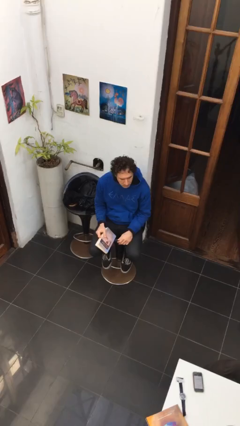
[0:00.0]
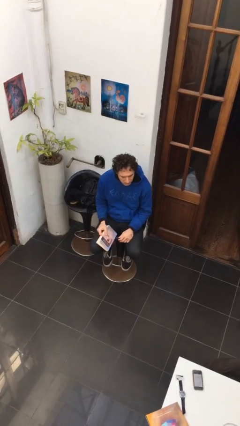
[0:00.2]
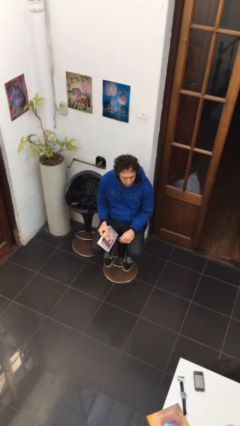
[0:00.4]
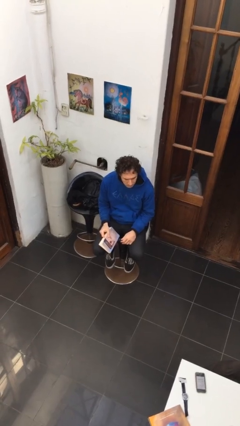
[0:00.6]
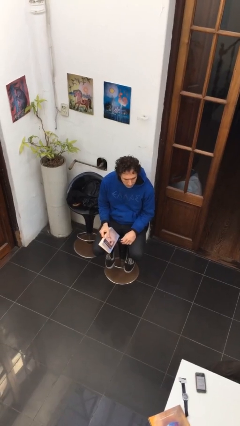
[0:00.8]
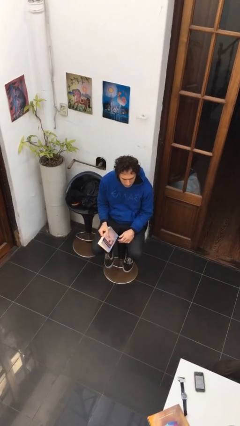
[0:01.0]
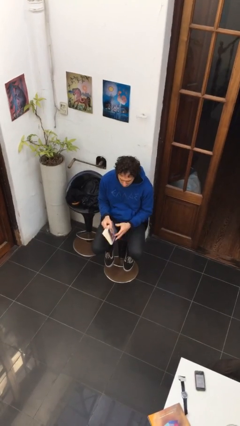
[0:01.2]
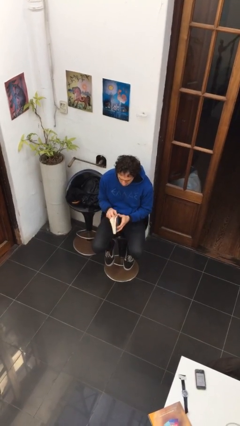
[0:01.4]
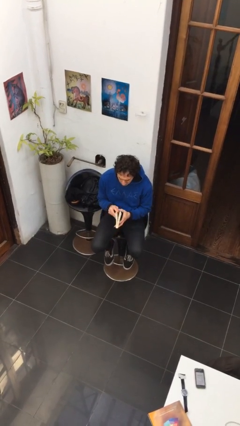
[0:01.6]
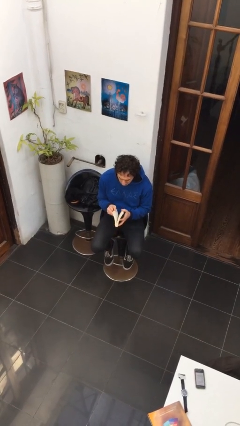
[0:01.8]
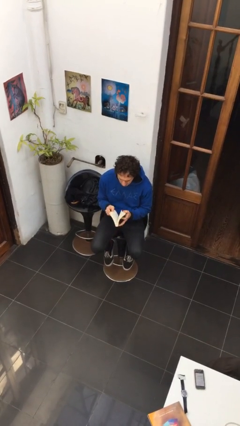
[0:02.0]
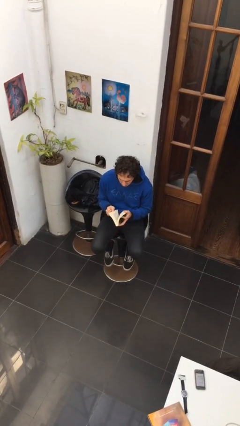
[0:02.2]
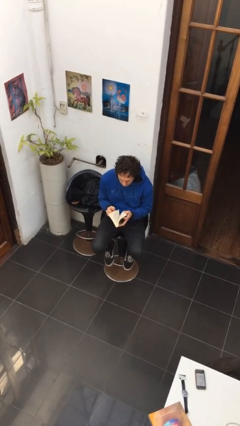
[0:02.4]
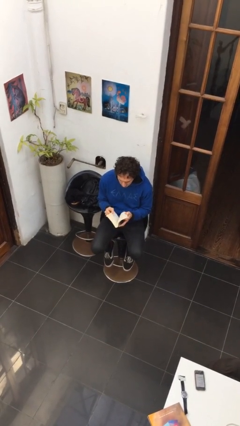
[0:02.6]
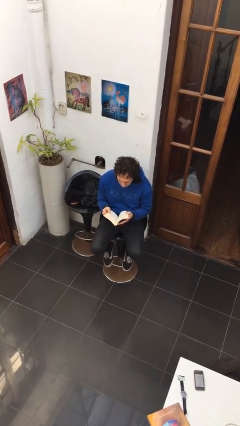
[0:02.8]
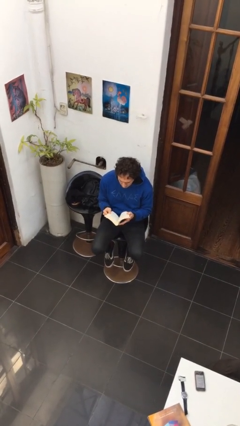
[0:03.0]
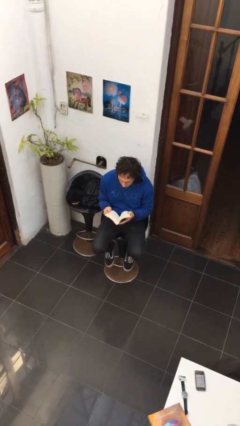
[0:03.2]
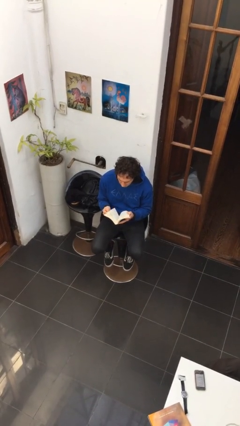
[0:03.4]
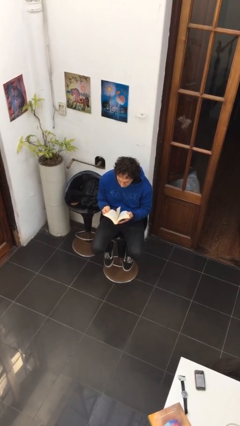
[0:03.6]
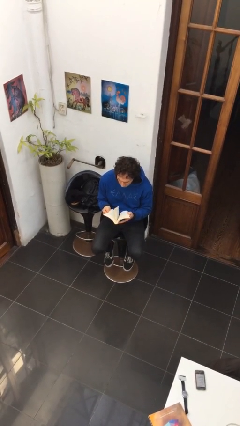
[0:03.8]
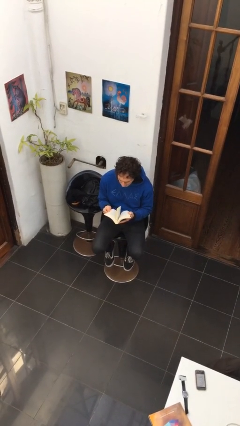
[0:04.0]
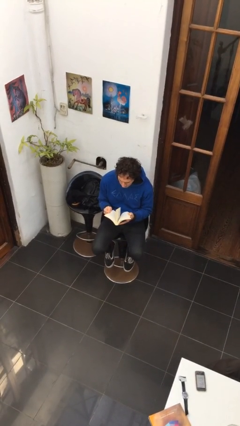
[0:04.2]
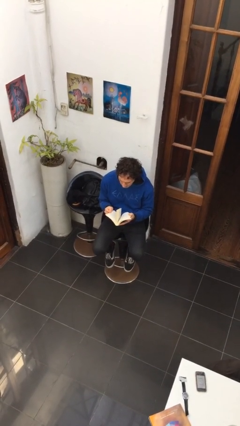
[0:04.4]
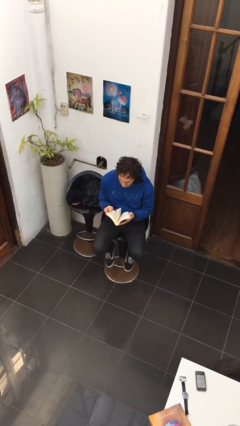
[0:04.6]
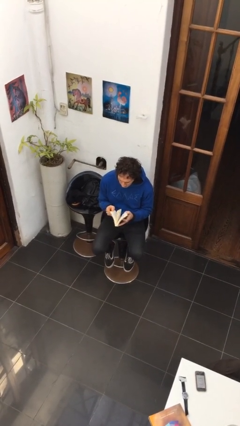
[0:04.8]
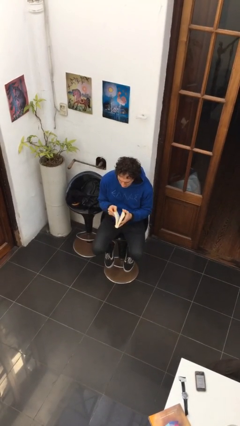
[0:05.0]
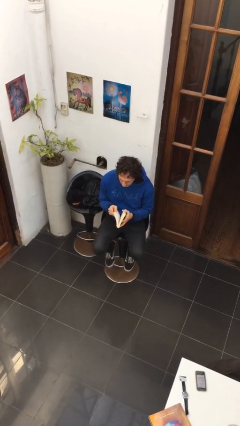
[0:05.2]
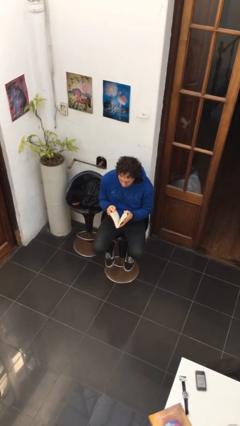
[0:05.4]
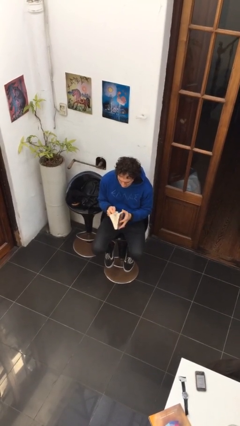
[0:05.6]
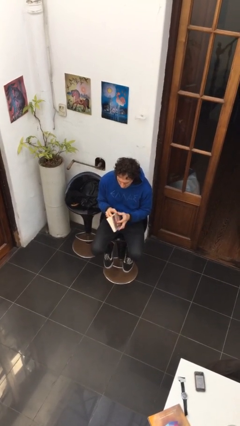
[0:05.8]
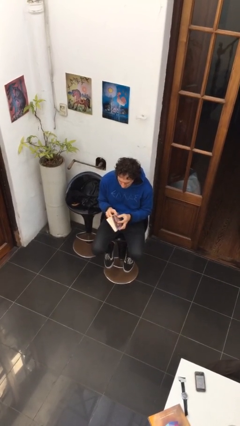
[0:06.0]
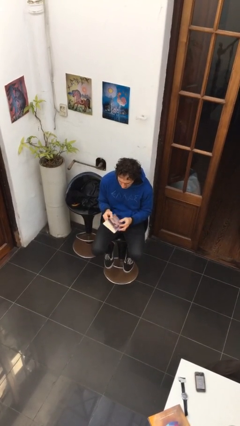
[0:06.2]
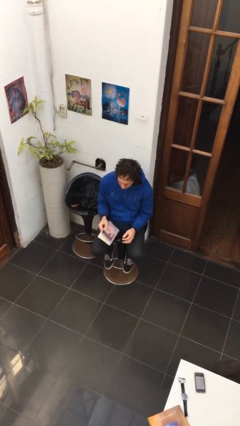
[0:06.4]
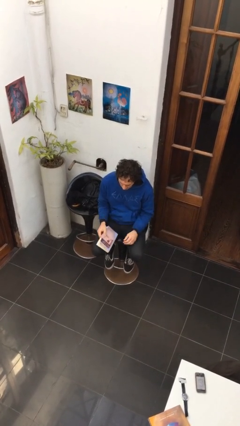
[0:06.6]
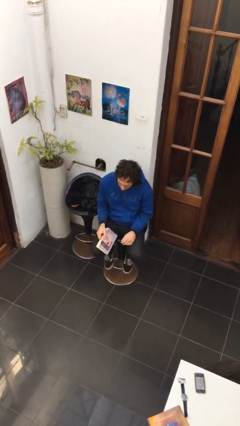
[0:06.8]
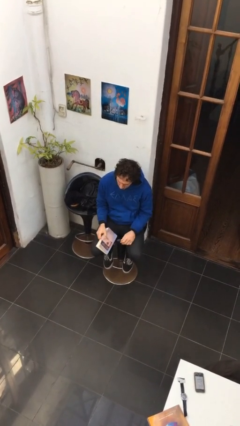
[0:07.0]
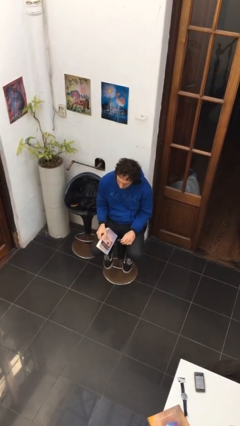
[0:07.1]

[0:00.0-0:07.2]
person reads book

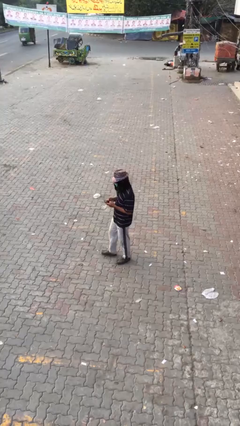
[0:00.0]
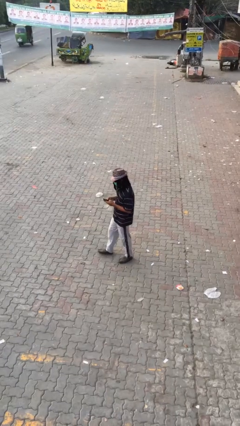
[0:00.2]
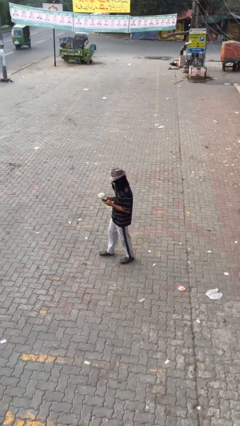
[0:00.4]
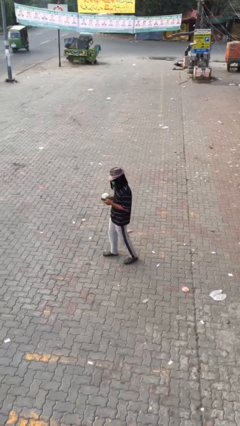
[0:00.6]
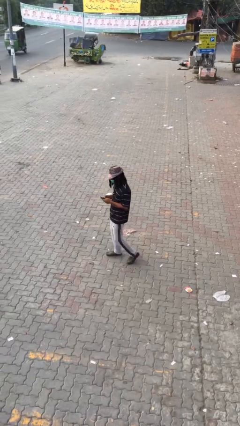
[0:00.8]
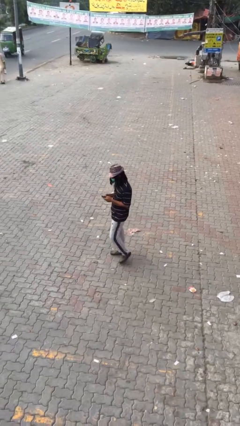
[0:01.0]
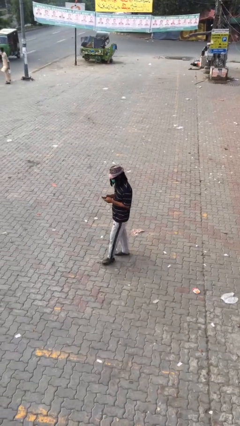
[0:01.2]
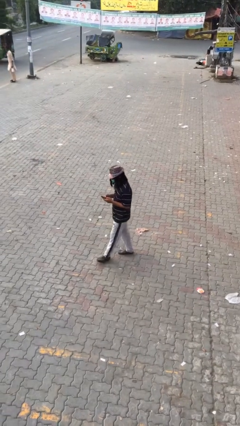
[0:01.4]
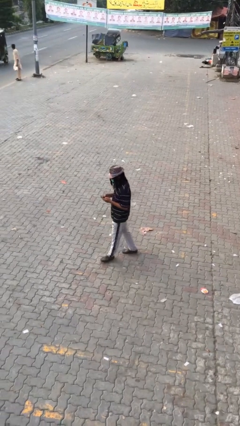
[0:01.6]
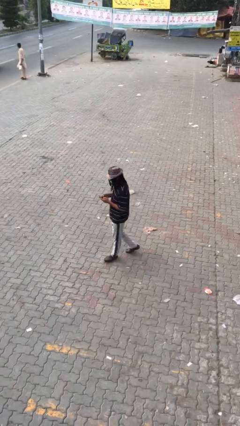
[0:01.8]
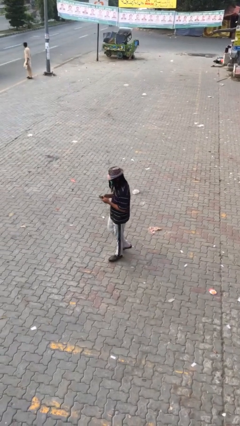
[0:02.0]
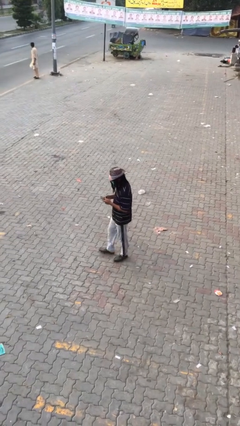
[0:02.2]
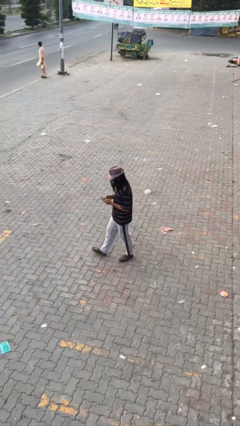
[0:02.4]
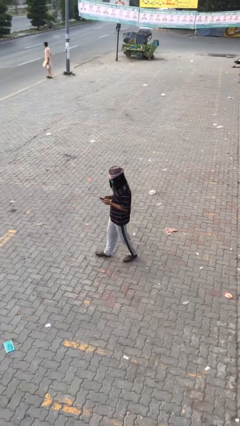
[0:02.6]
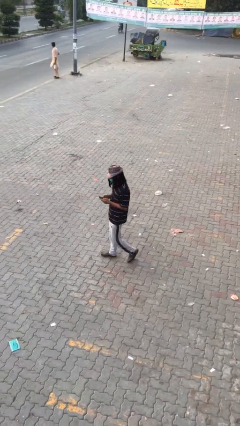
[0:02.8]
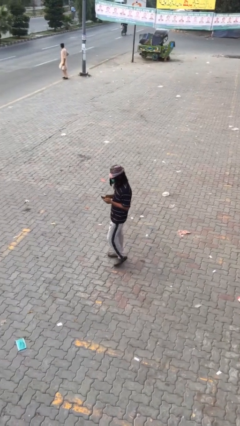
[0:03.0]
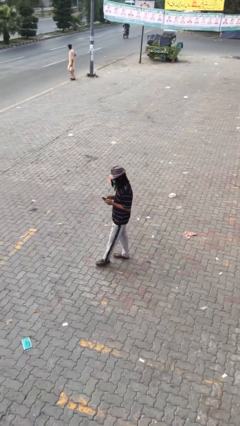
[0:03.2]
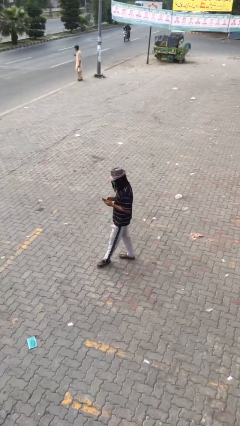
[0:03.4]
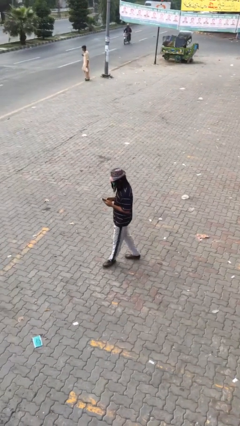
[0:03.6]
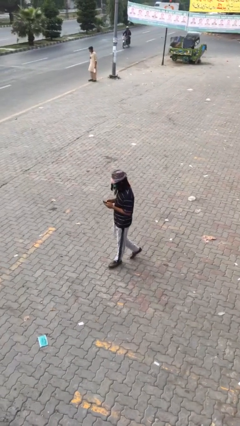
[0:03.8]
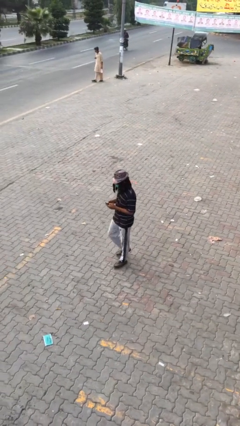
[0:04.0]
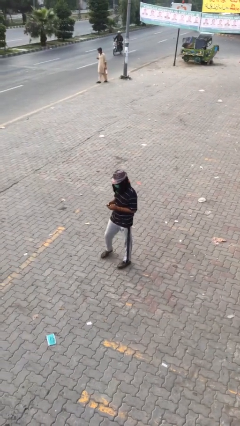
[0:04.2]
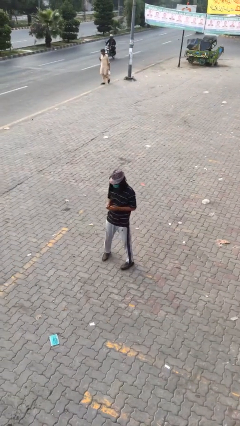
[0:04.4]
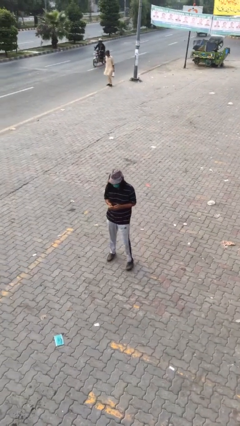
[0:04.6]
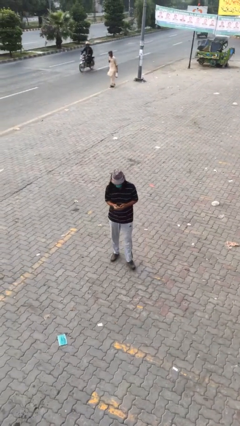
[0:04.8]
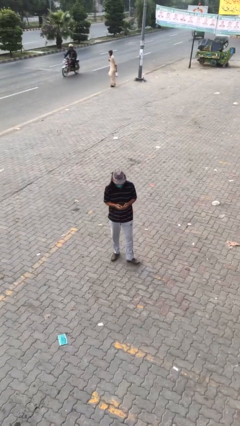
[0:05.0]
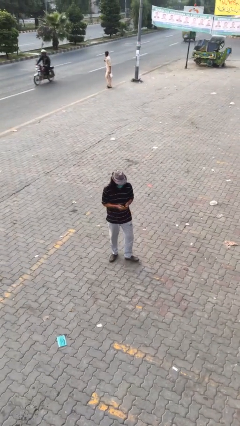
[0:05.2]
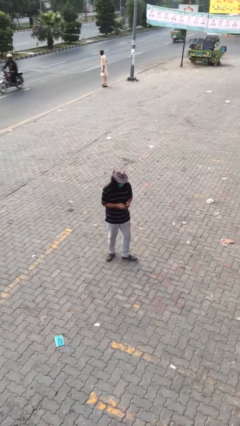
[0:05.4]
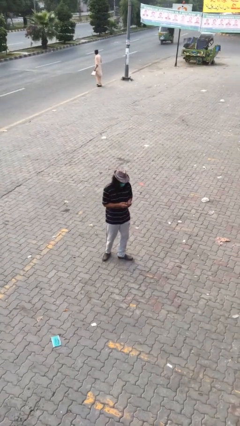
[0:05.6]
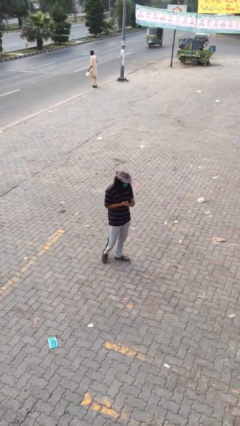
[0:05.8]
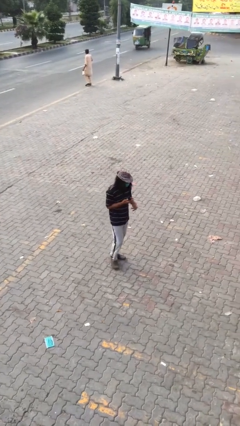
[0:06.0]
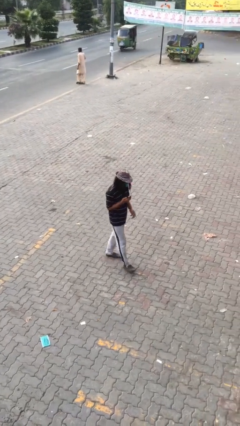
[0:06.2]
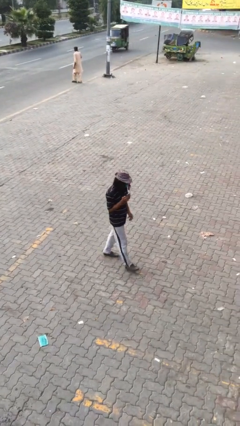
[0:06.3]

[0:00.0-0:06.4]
person texts on phone

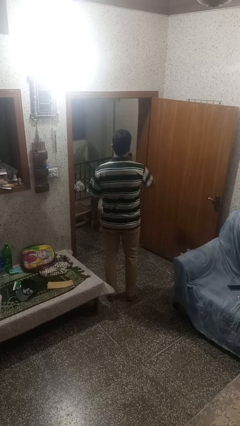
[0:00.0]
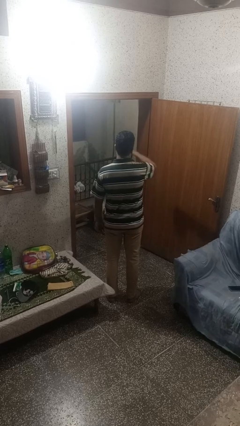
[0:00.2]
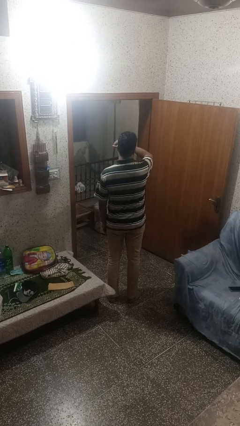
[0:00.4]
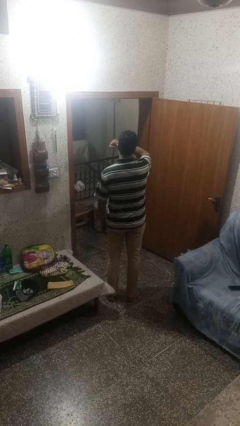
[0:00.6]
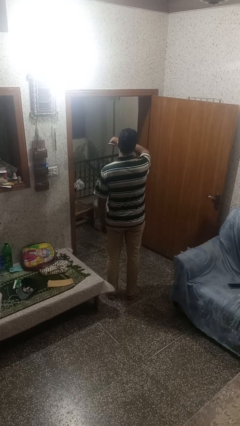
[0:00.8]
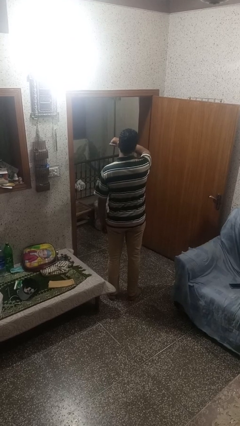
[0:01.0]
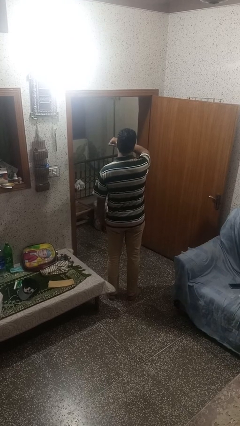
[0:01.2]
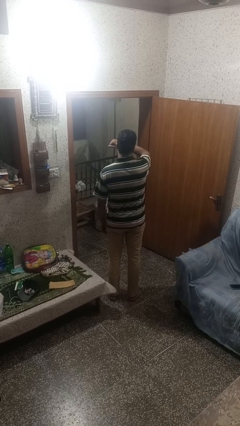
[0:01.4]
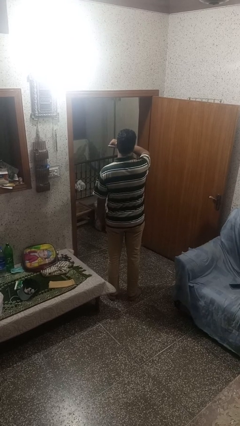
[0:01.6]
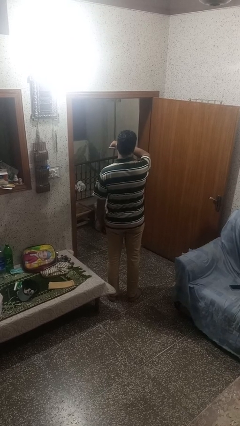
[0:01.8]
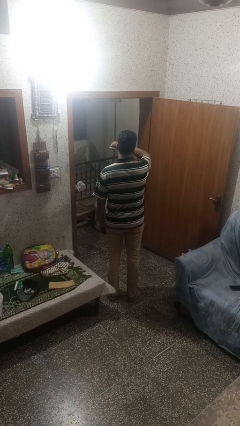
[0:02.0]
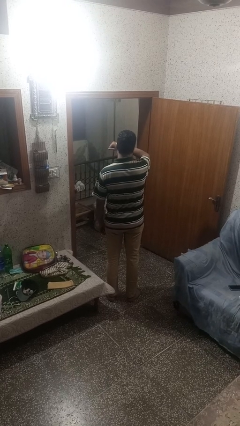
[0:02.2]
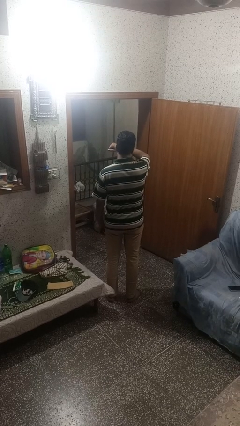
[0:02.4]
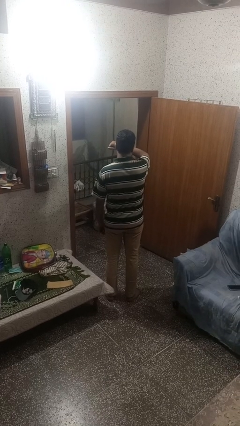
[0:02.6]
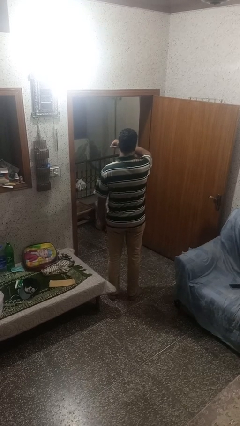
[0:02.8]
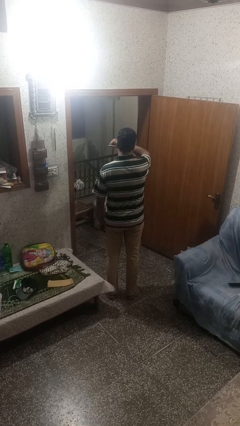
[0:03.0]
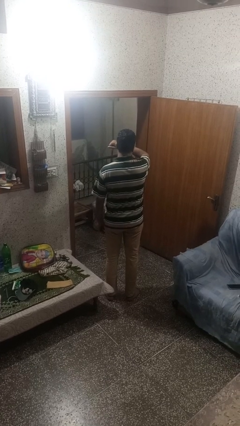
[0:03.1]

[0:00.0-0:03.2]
person karate chop

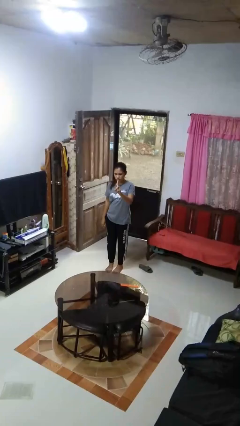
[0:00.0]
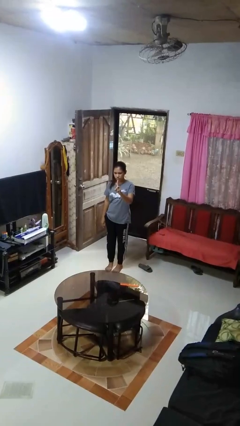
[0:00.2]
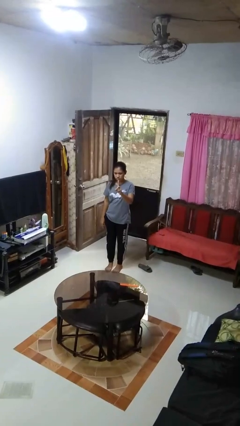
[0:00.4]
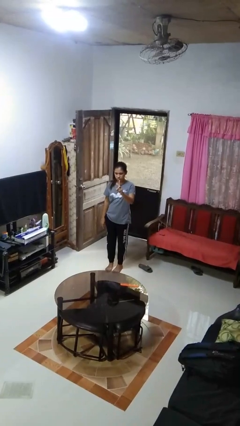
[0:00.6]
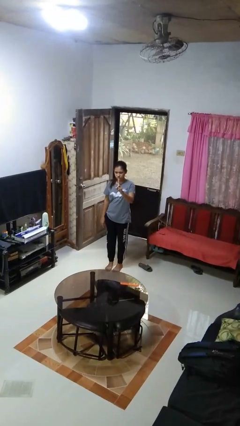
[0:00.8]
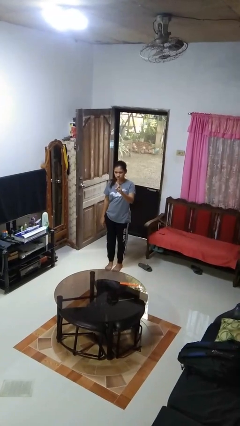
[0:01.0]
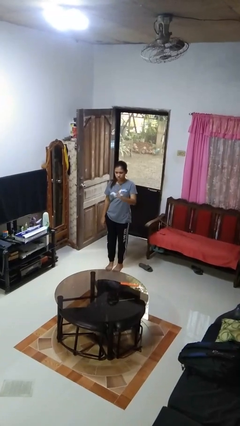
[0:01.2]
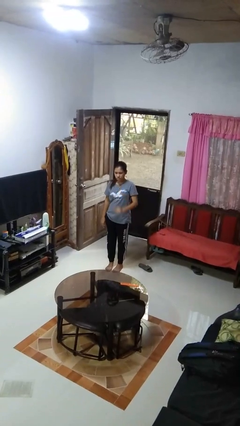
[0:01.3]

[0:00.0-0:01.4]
person gestures number one
